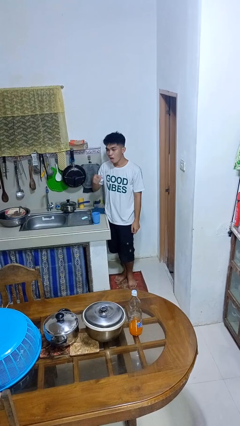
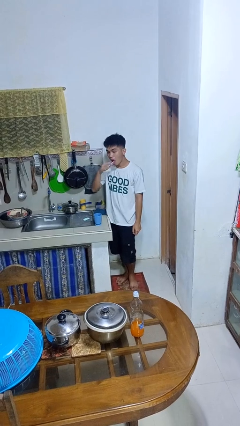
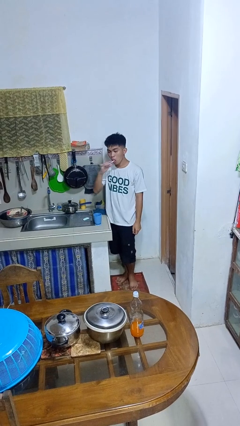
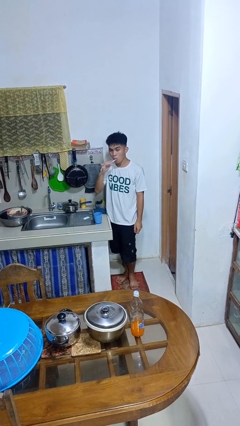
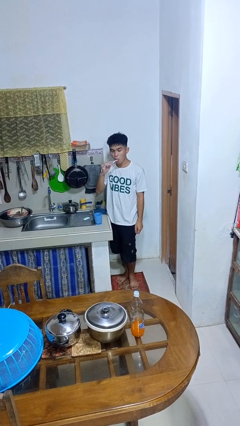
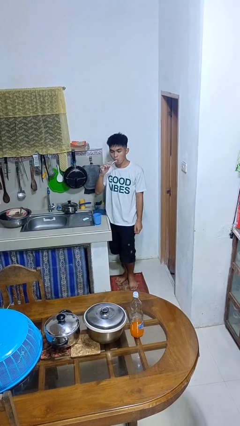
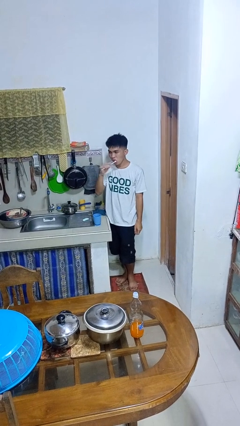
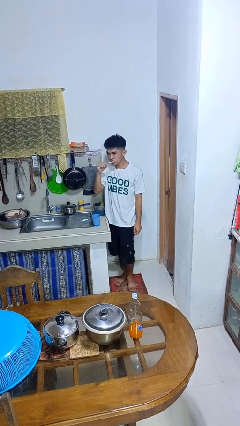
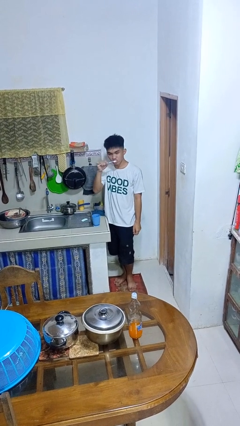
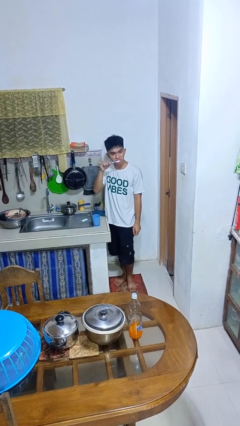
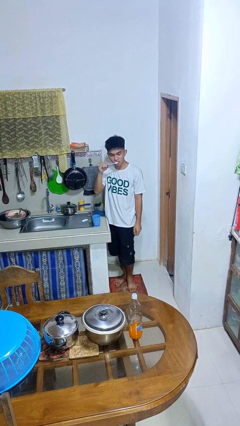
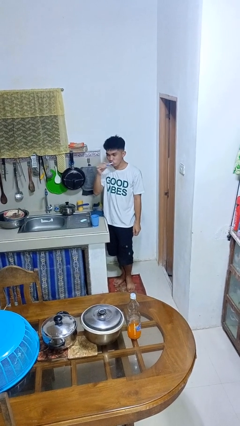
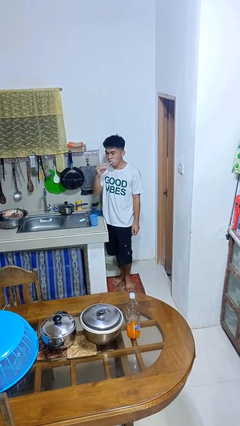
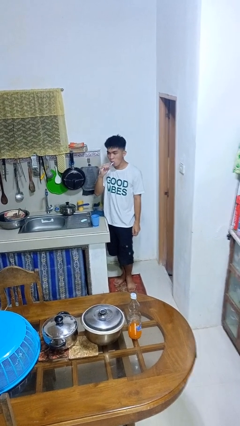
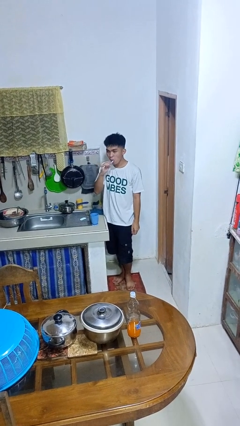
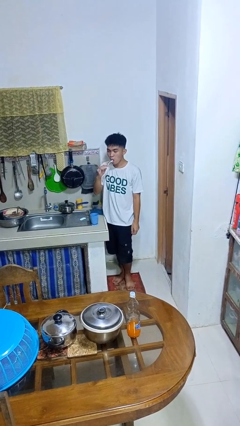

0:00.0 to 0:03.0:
person brushes teeth

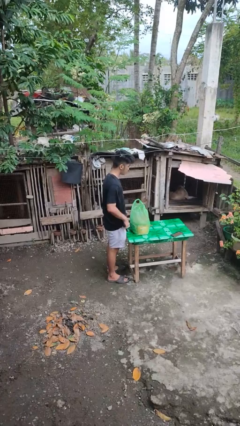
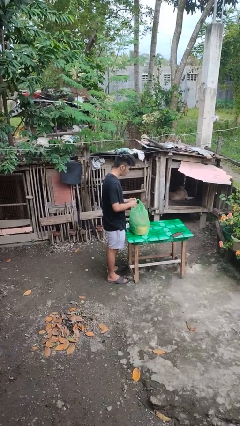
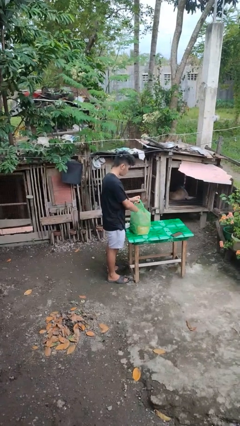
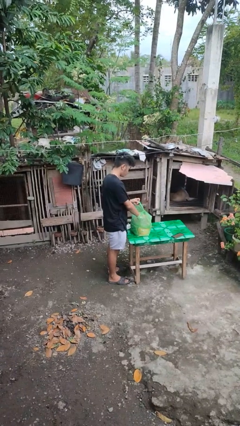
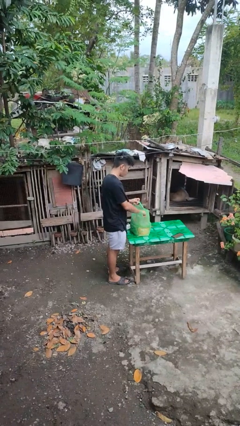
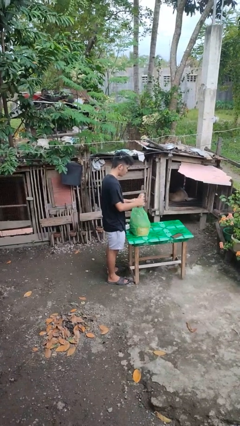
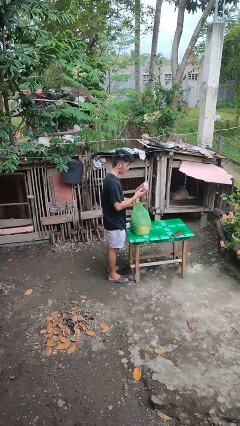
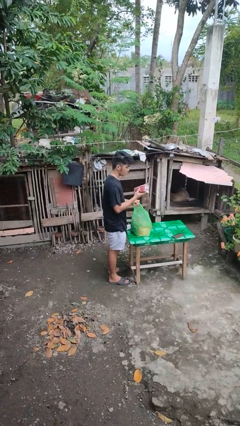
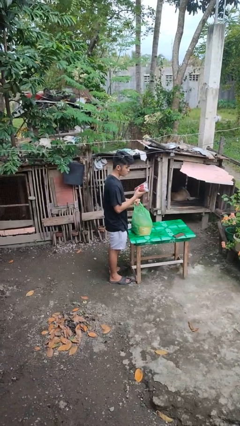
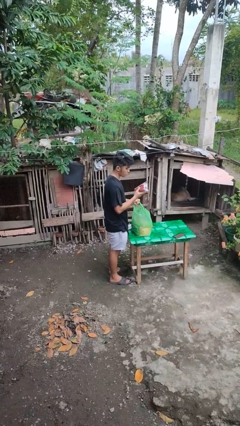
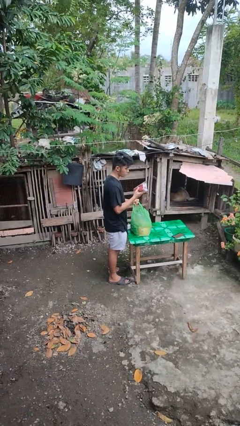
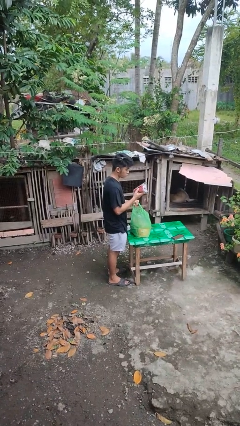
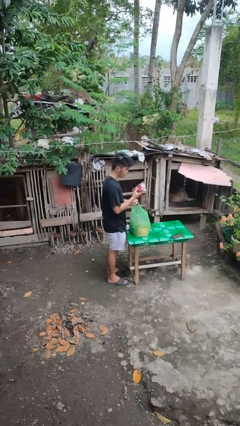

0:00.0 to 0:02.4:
person takes object from bag

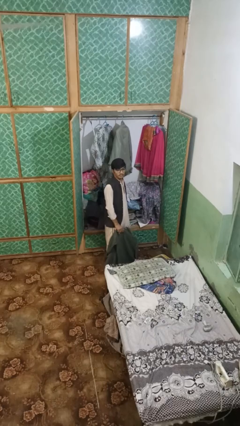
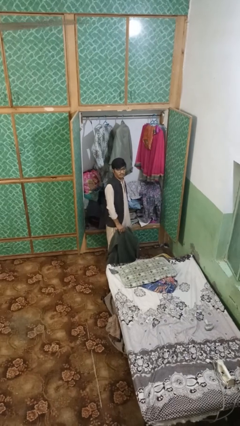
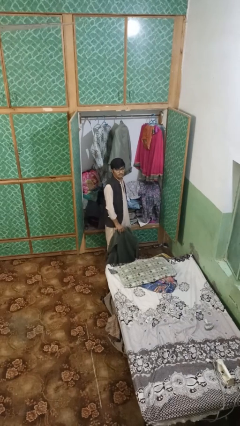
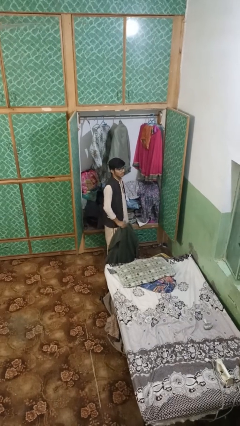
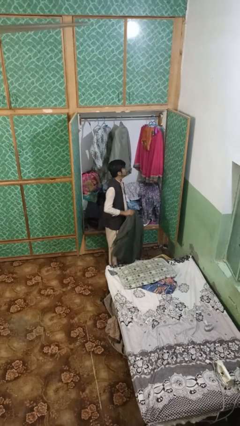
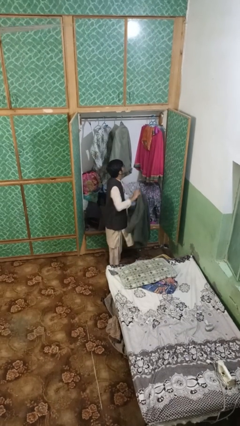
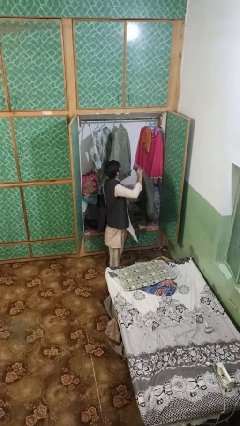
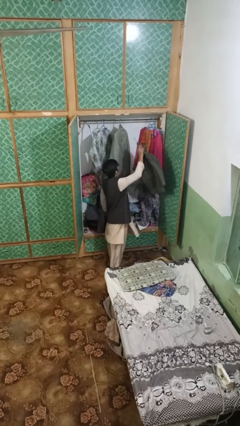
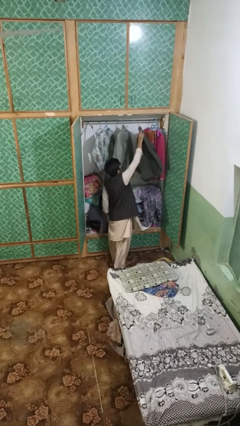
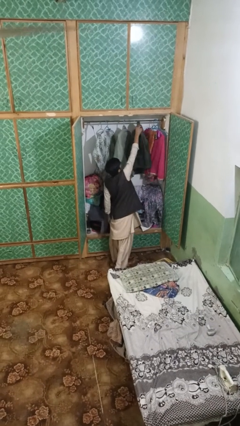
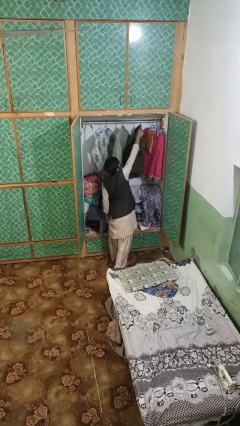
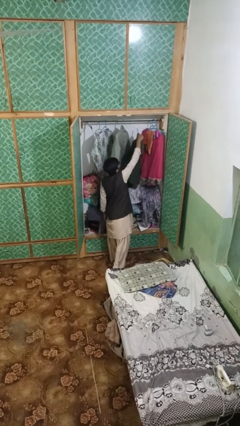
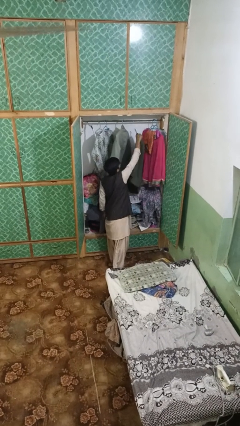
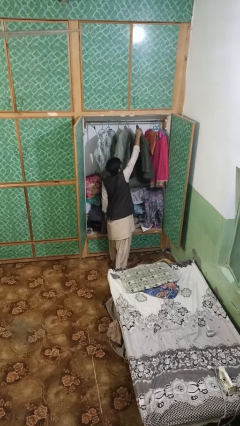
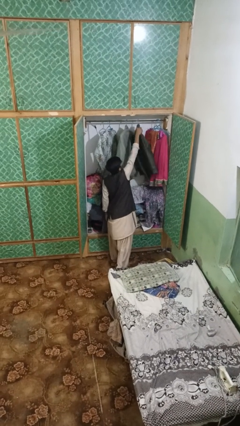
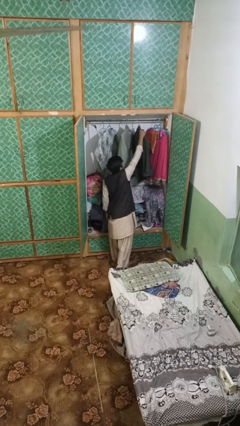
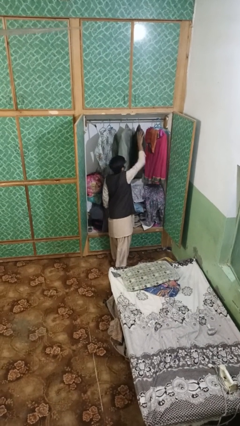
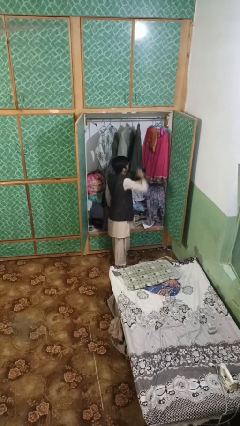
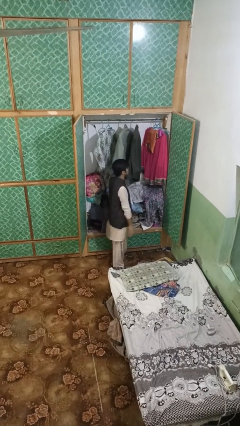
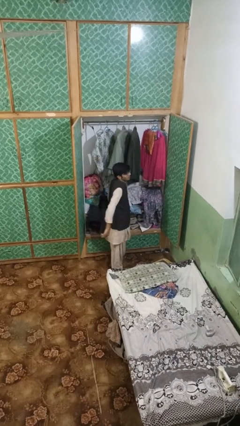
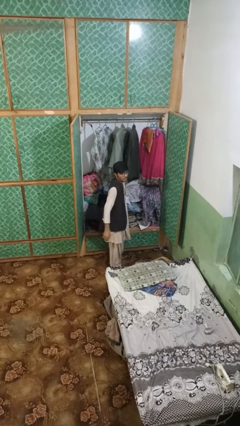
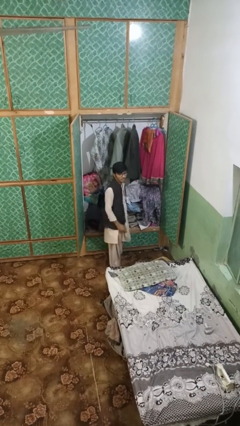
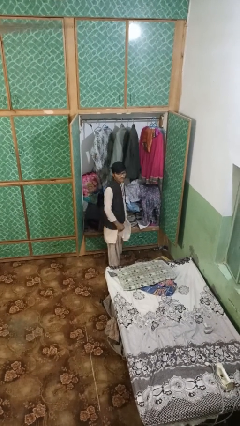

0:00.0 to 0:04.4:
person puts clothes into closet

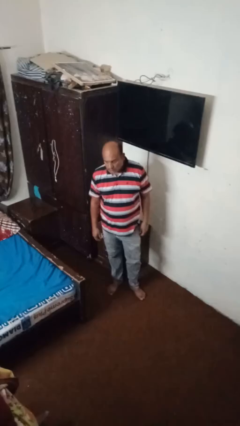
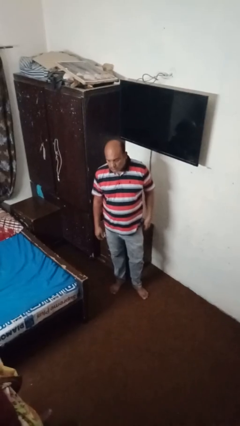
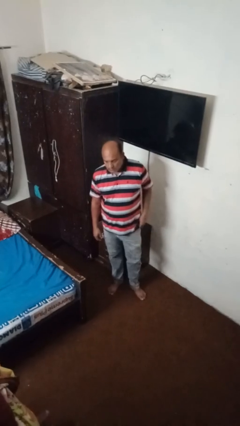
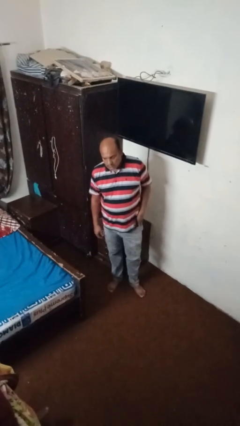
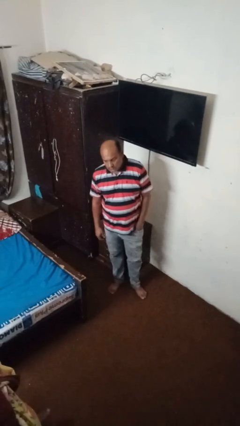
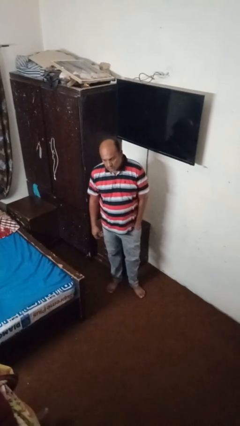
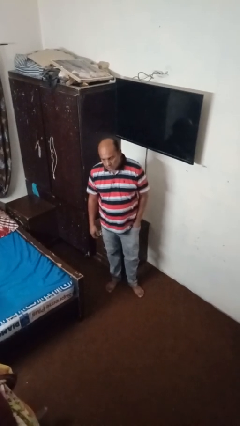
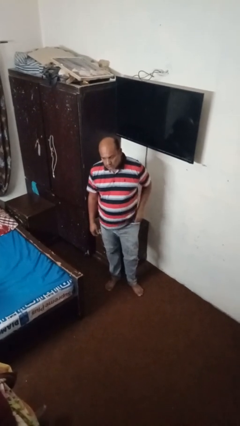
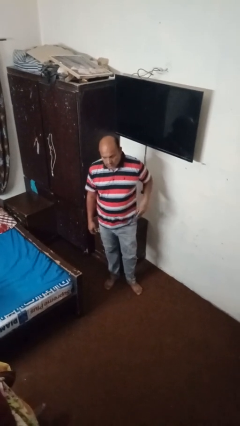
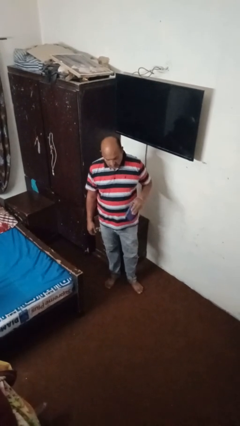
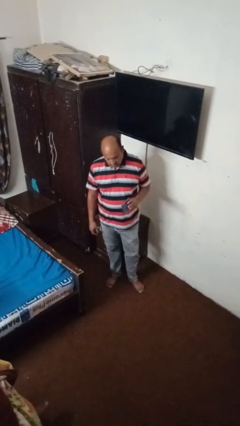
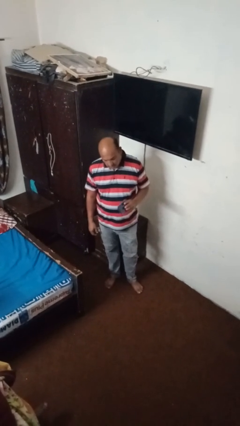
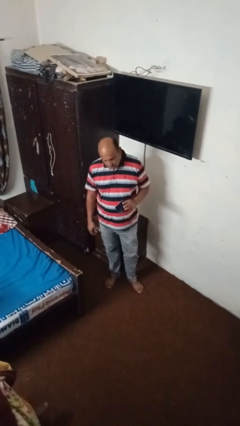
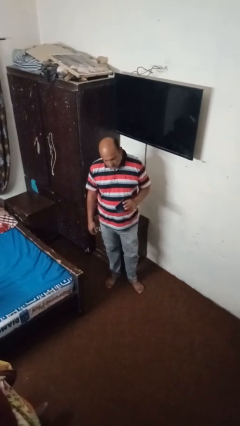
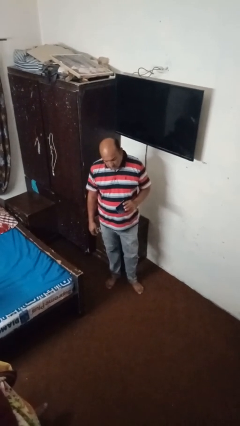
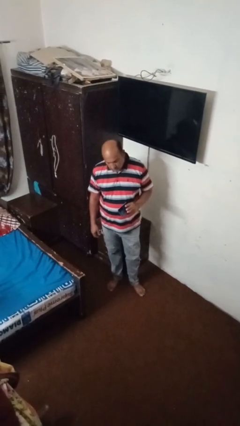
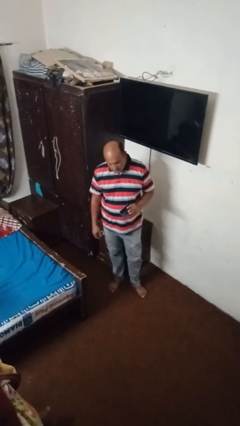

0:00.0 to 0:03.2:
person takes phone from pocket

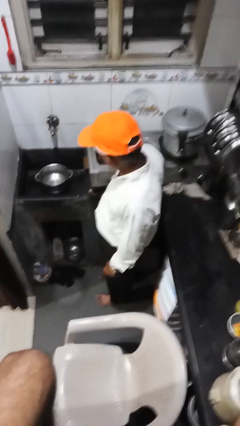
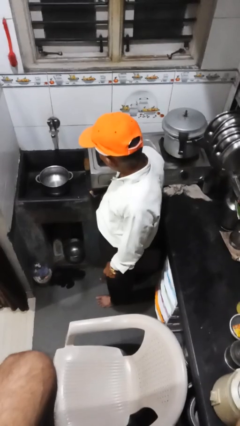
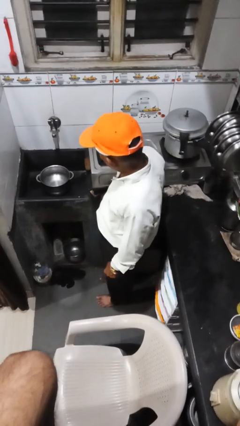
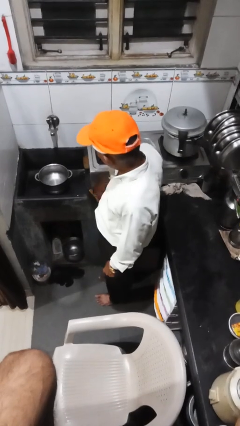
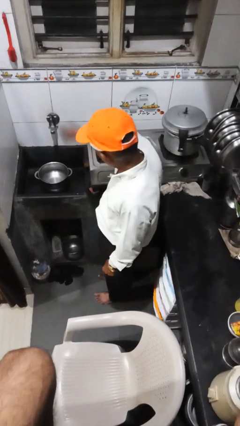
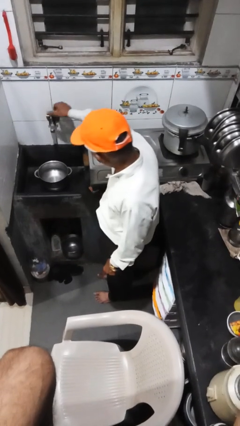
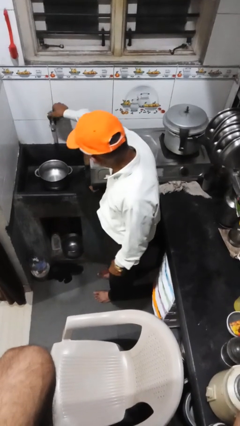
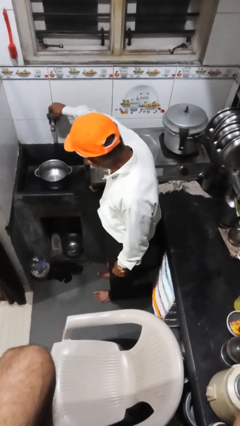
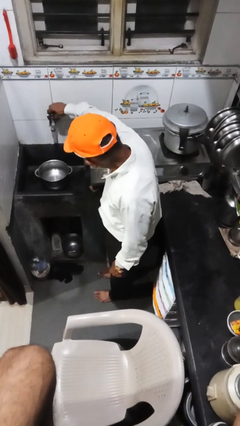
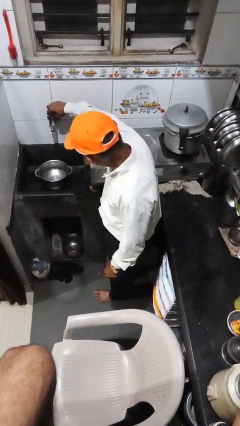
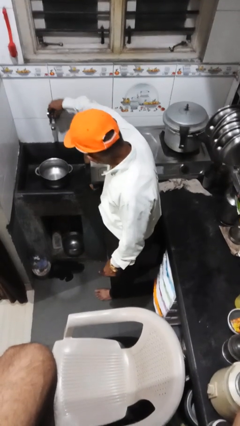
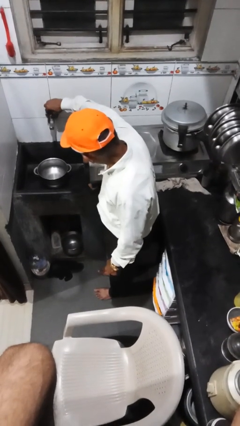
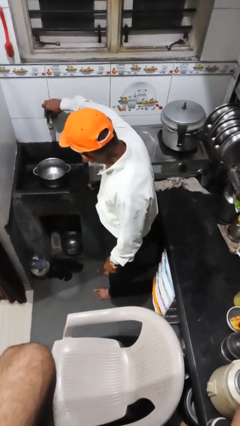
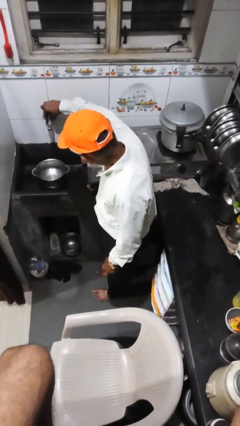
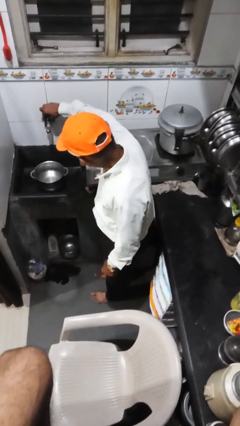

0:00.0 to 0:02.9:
person turns on faucet

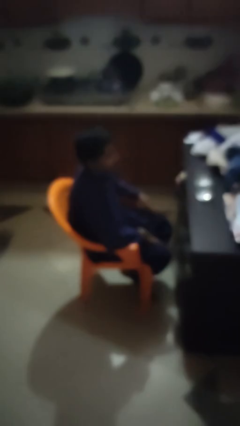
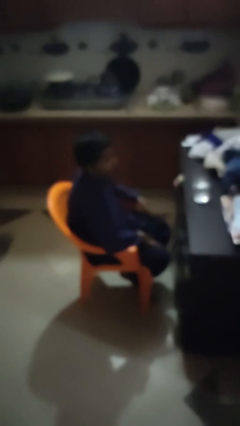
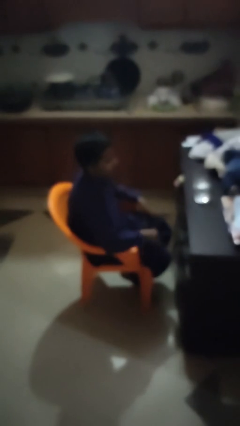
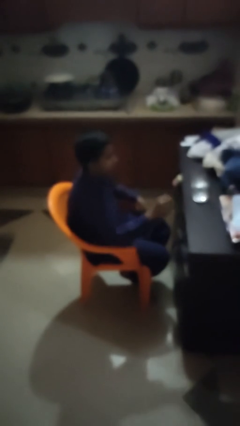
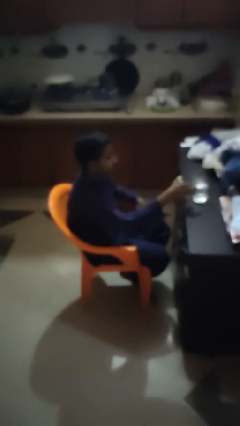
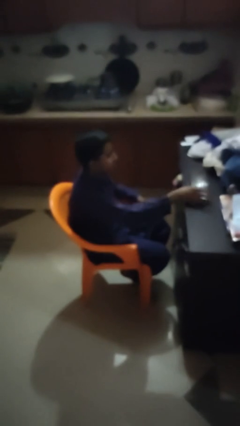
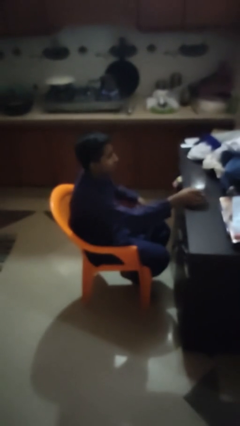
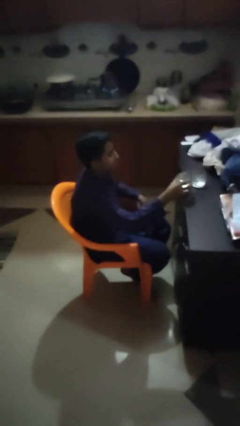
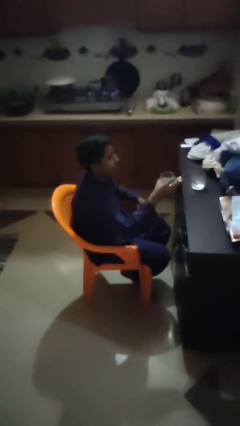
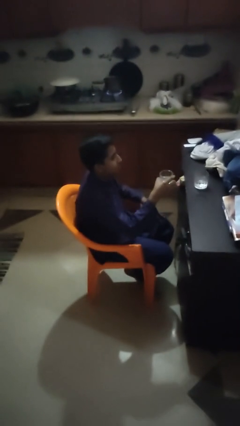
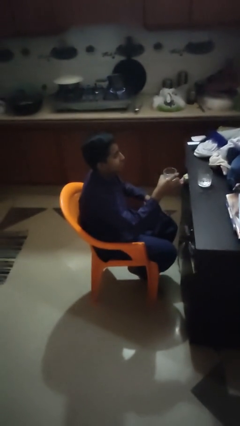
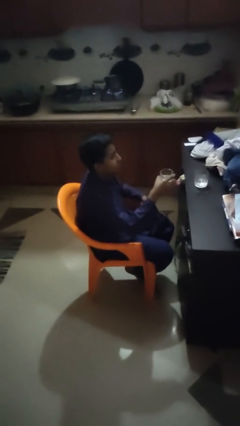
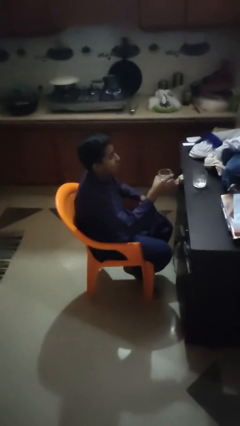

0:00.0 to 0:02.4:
person picks up object from table
